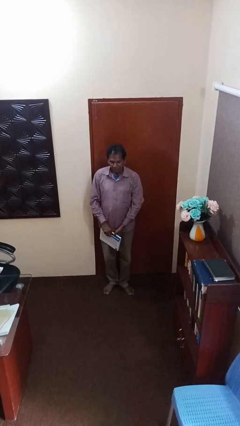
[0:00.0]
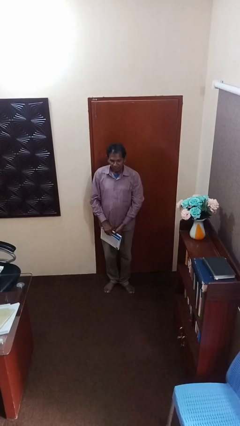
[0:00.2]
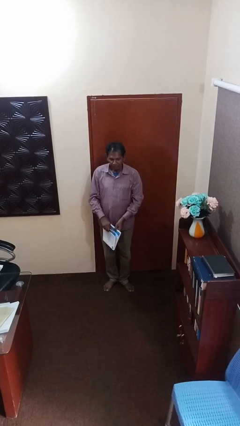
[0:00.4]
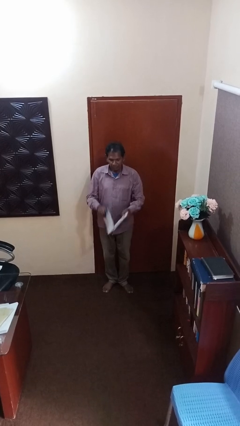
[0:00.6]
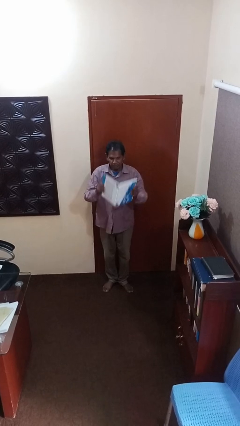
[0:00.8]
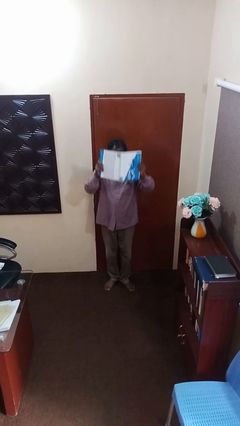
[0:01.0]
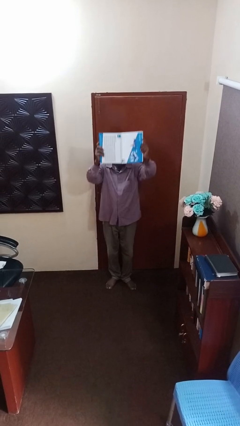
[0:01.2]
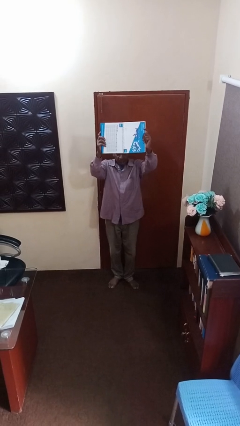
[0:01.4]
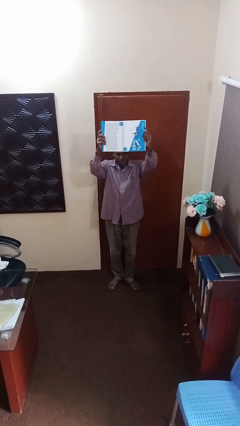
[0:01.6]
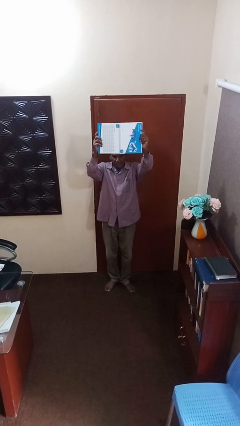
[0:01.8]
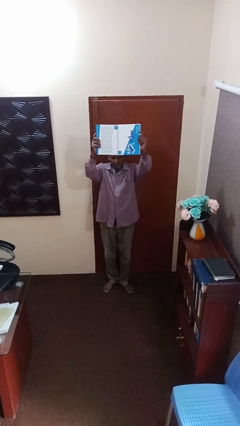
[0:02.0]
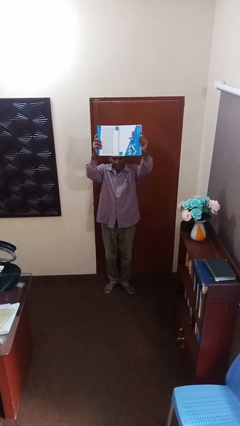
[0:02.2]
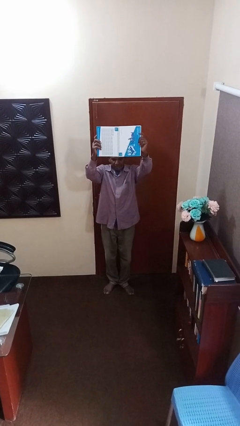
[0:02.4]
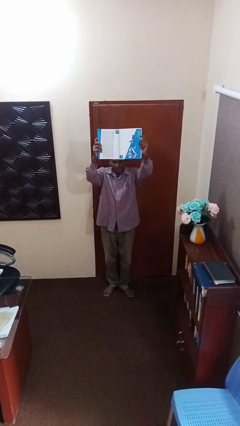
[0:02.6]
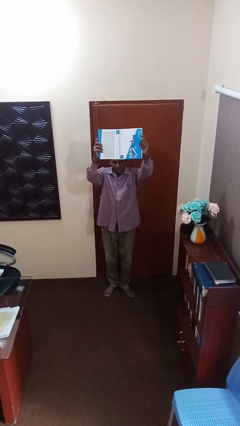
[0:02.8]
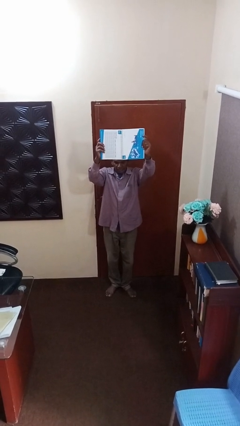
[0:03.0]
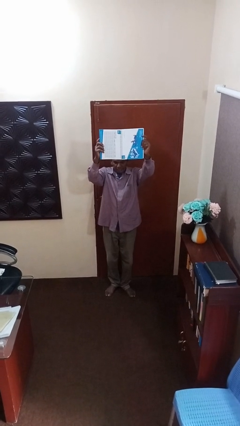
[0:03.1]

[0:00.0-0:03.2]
person holds object above head

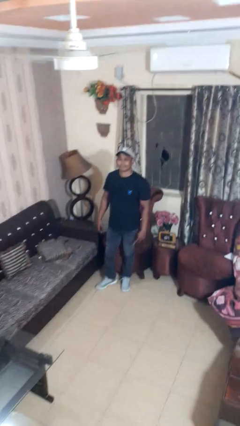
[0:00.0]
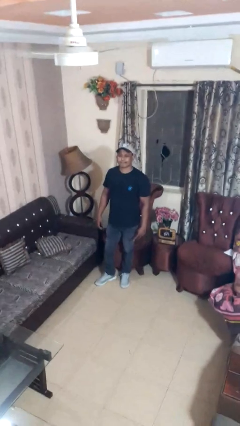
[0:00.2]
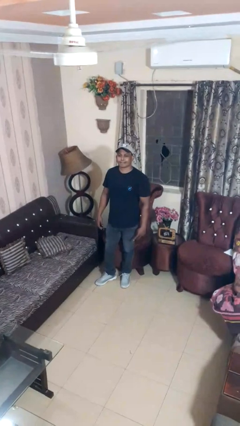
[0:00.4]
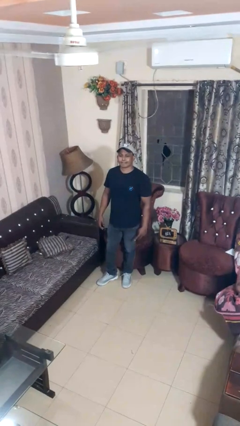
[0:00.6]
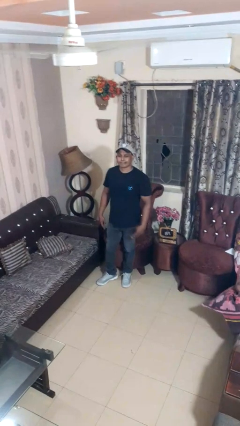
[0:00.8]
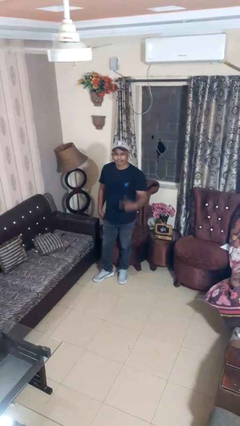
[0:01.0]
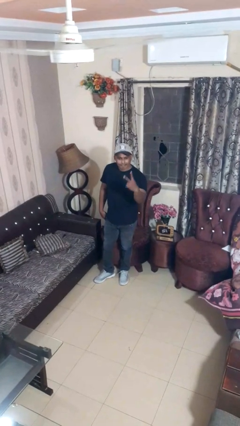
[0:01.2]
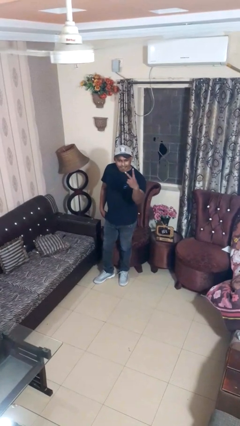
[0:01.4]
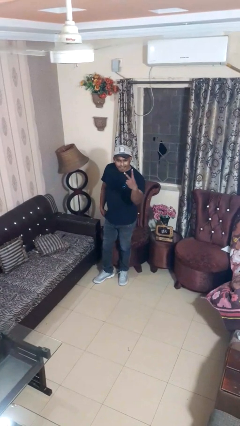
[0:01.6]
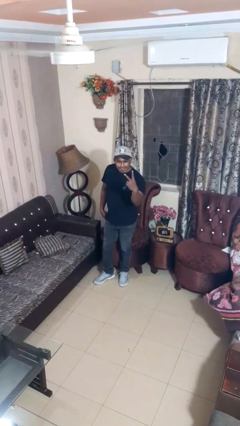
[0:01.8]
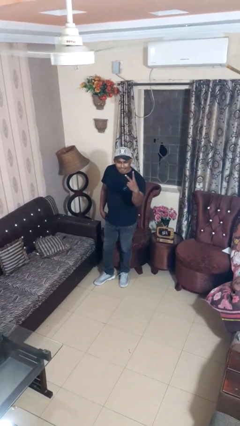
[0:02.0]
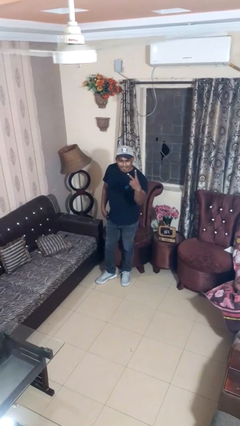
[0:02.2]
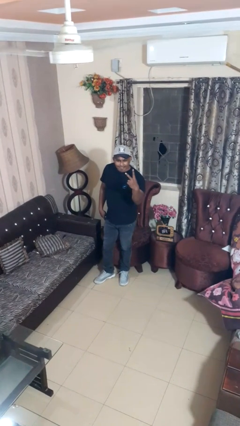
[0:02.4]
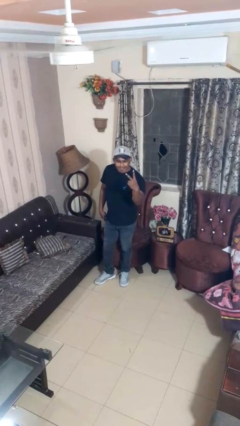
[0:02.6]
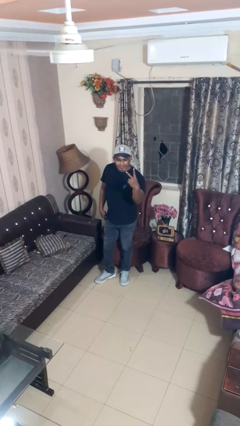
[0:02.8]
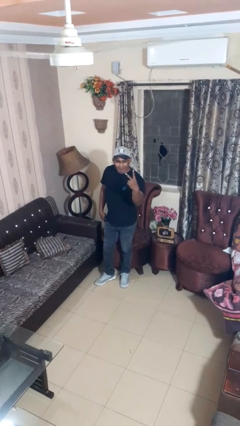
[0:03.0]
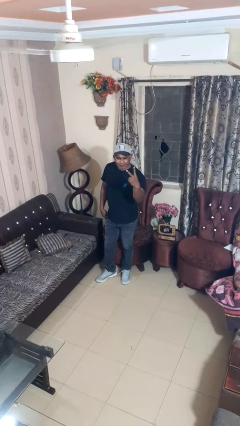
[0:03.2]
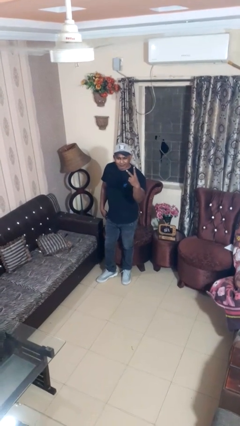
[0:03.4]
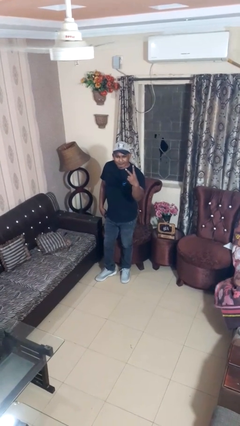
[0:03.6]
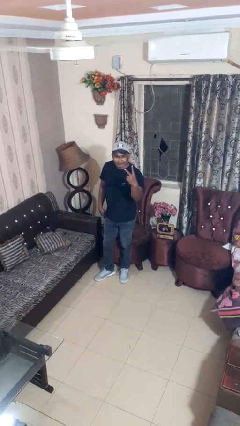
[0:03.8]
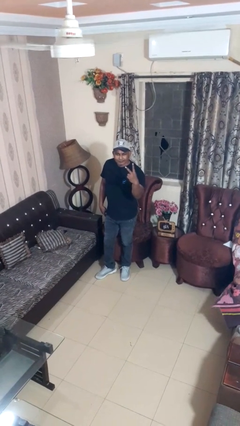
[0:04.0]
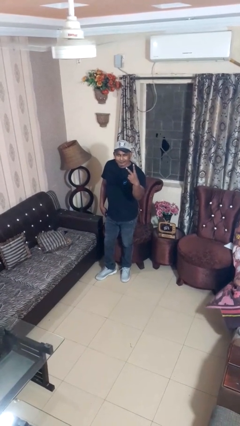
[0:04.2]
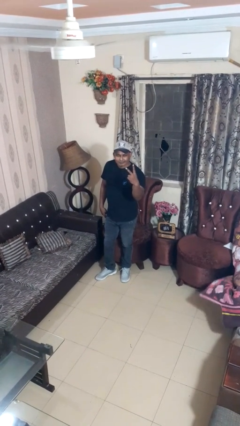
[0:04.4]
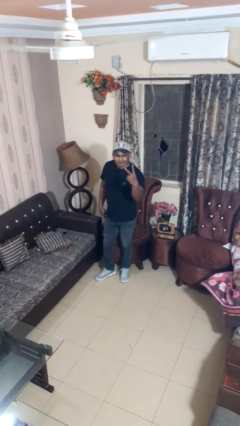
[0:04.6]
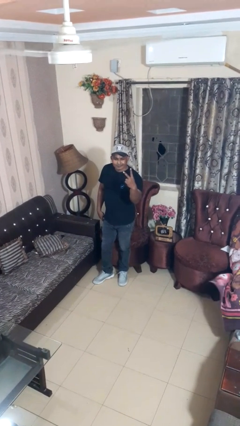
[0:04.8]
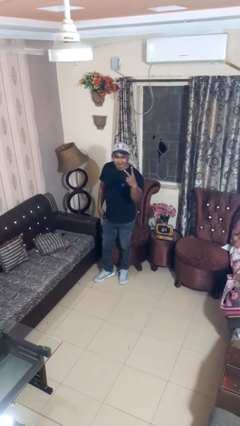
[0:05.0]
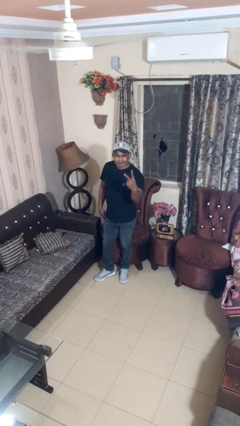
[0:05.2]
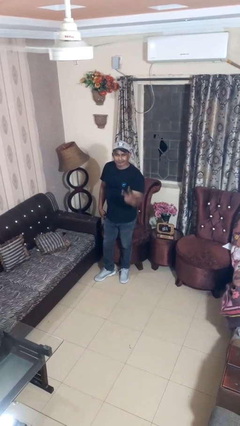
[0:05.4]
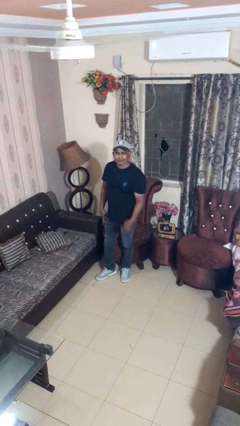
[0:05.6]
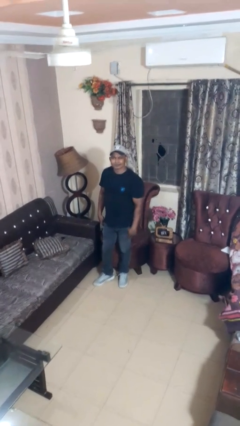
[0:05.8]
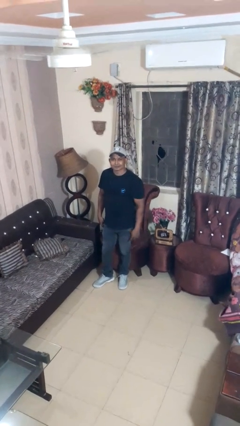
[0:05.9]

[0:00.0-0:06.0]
person gestures peace

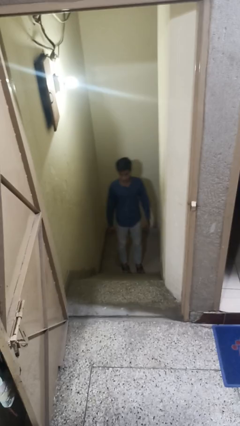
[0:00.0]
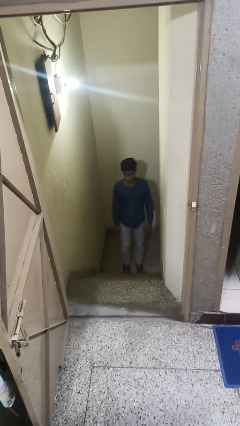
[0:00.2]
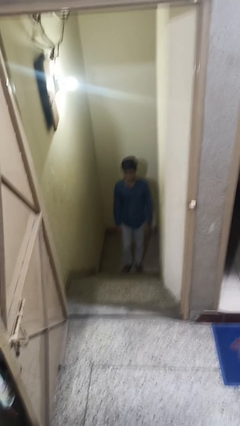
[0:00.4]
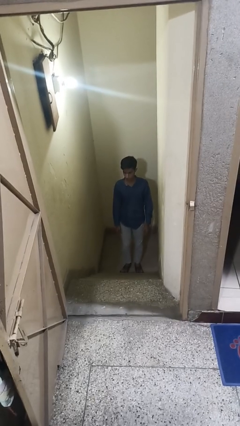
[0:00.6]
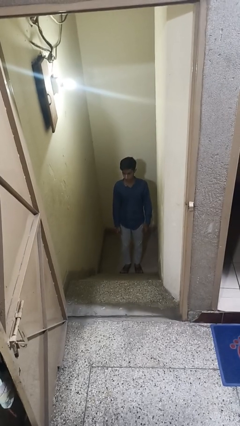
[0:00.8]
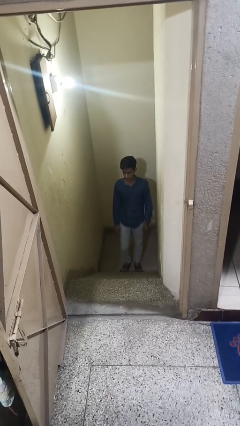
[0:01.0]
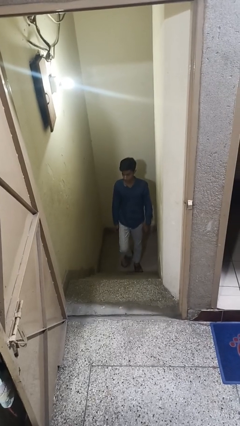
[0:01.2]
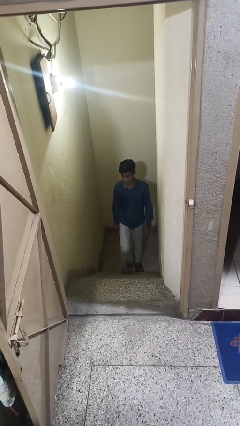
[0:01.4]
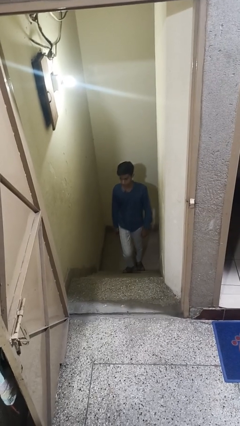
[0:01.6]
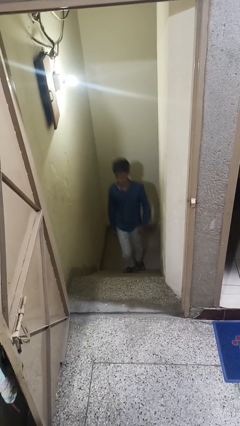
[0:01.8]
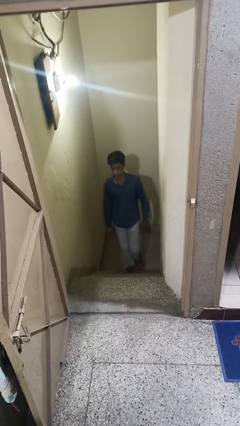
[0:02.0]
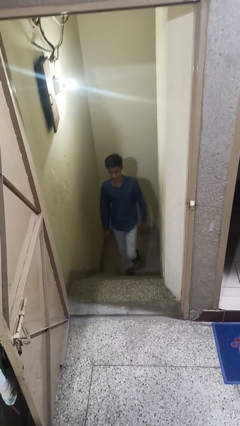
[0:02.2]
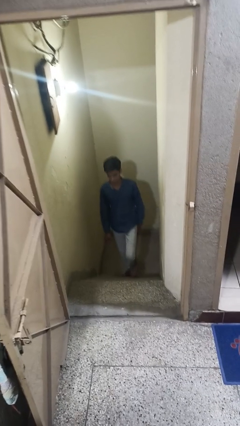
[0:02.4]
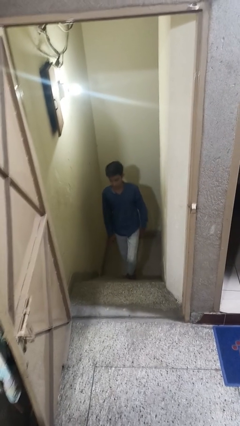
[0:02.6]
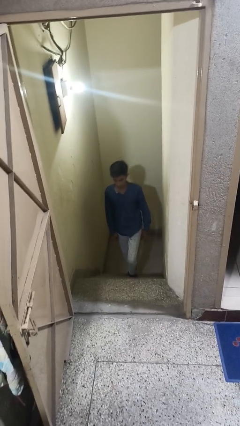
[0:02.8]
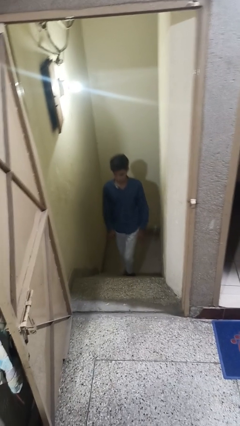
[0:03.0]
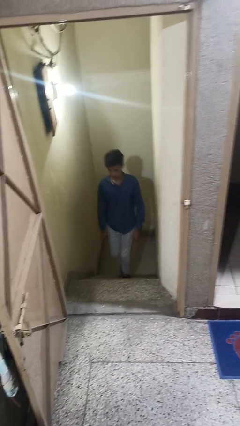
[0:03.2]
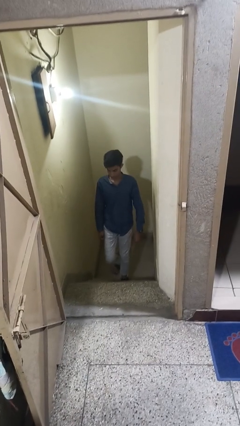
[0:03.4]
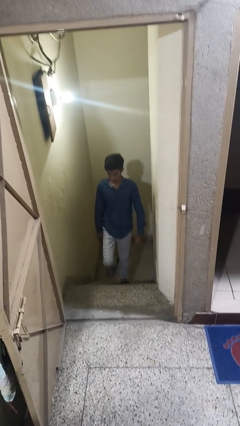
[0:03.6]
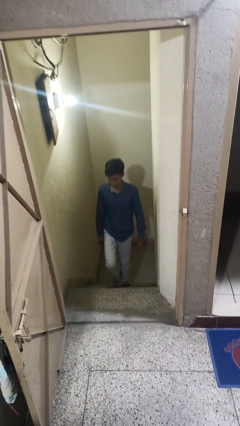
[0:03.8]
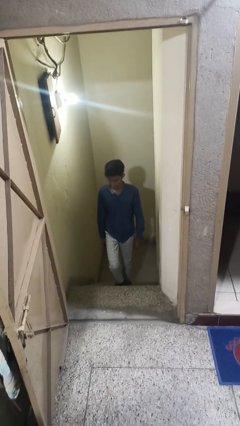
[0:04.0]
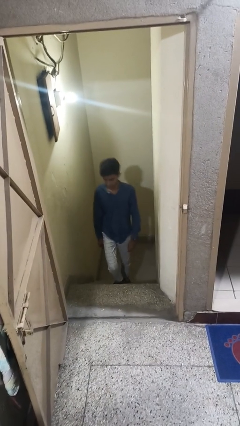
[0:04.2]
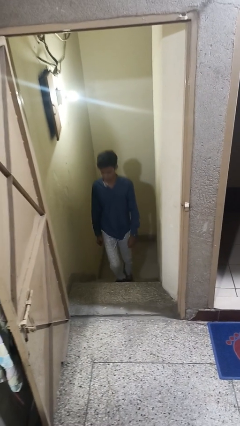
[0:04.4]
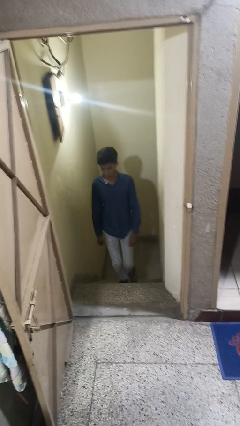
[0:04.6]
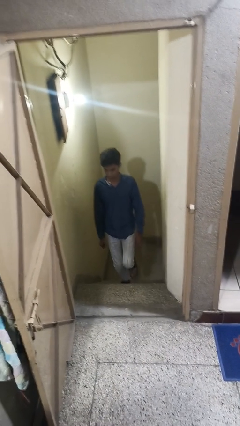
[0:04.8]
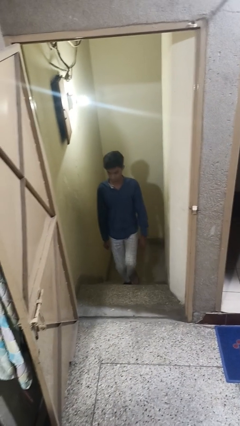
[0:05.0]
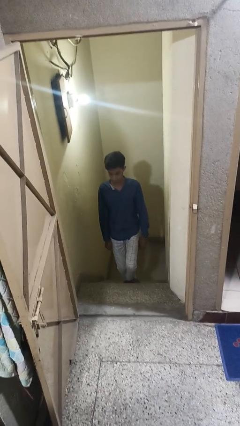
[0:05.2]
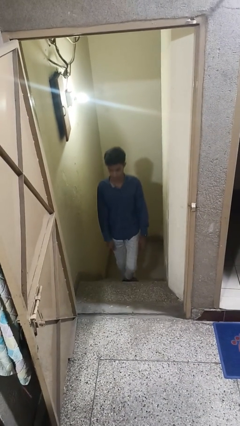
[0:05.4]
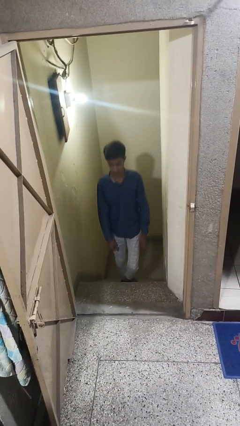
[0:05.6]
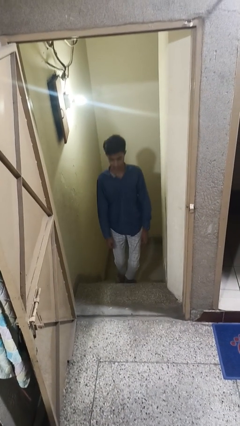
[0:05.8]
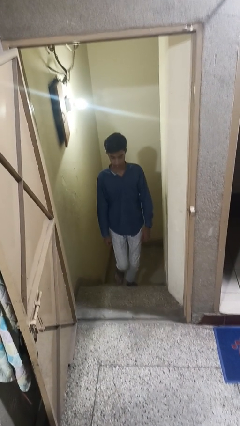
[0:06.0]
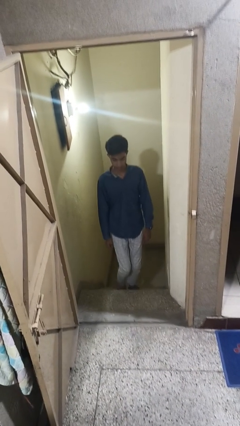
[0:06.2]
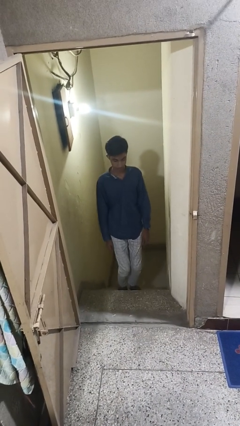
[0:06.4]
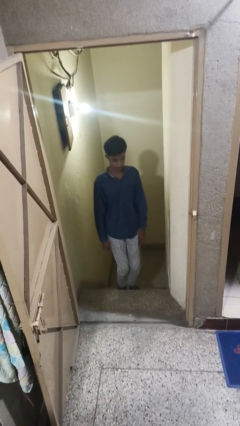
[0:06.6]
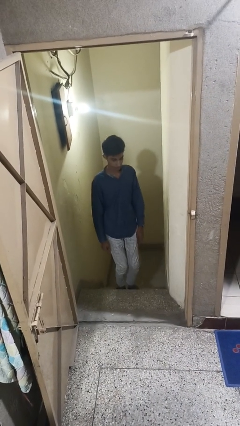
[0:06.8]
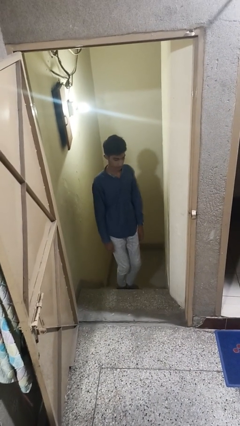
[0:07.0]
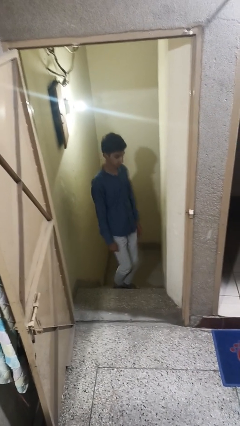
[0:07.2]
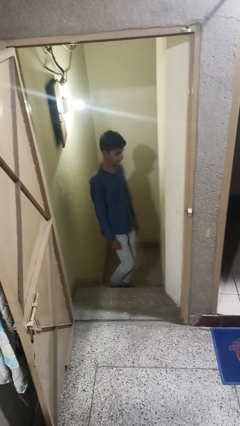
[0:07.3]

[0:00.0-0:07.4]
person climbs up stairs

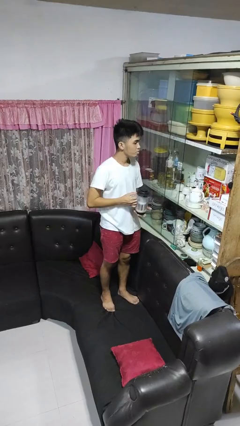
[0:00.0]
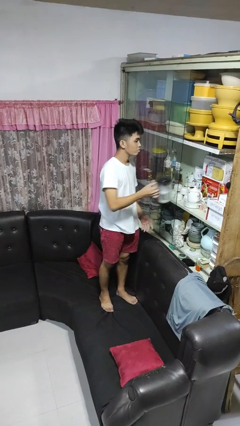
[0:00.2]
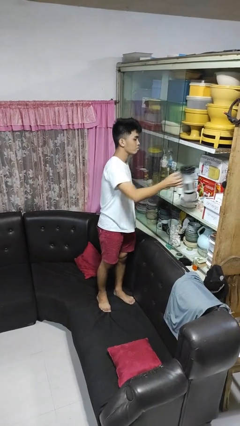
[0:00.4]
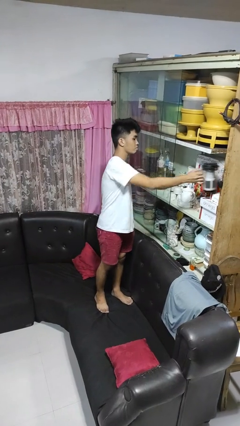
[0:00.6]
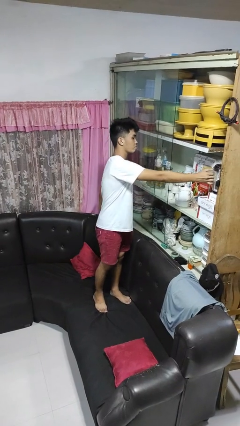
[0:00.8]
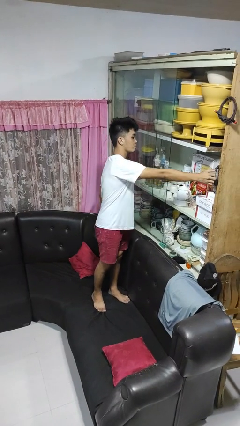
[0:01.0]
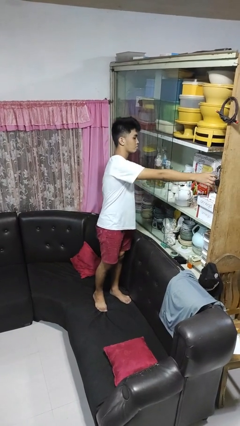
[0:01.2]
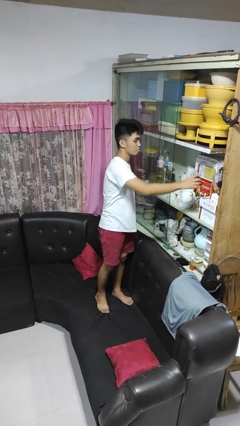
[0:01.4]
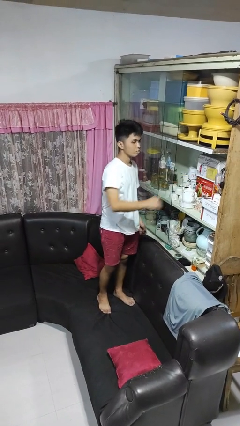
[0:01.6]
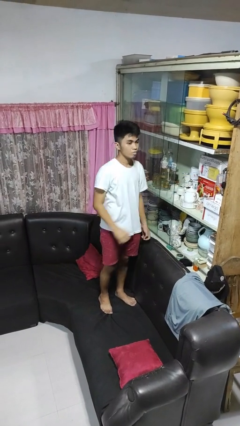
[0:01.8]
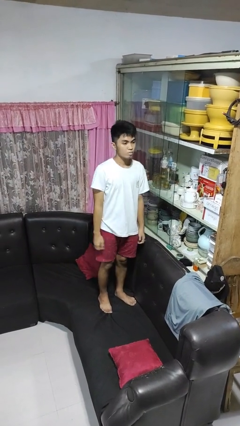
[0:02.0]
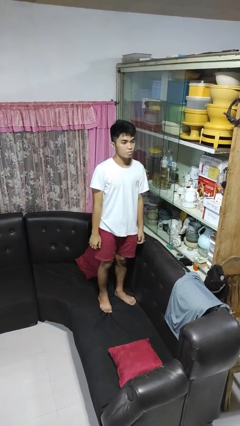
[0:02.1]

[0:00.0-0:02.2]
person puts down object into cabinet
